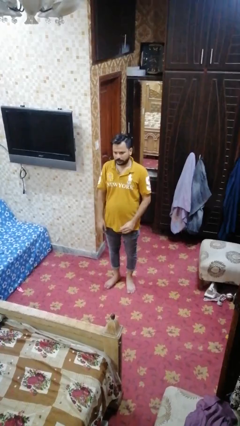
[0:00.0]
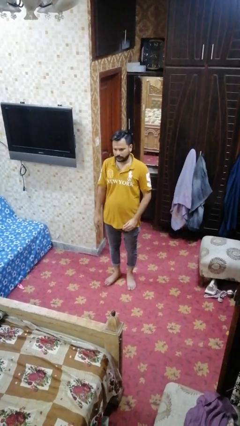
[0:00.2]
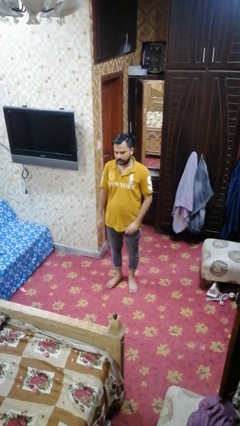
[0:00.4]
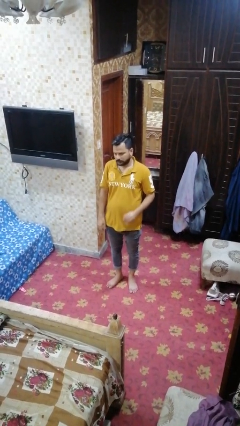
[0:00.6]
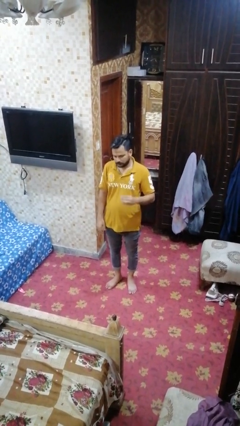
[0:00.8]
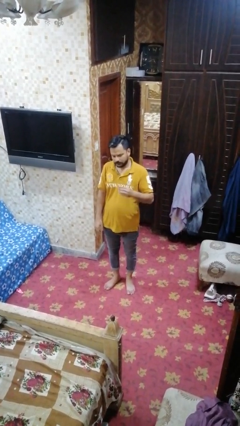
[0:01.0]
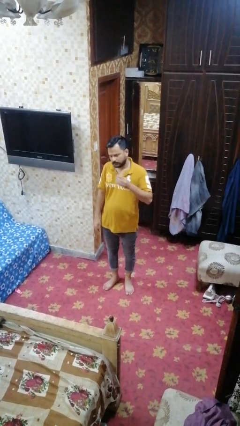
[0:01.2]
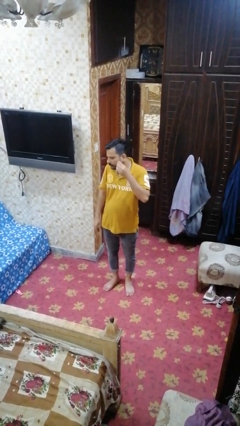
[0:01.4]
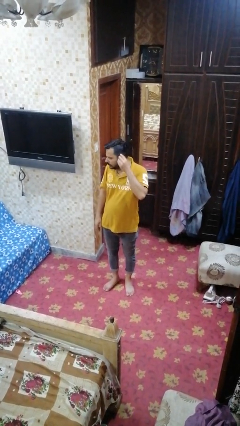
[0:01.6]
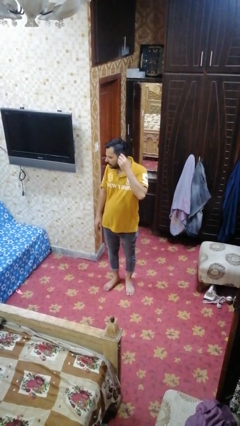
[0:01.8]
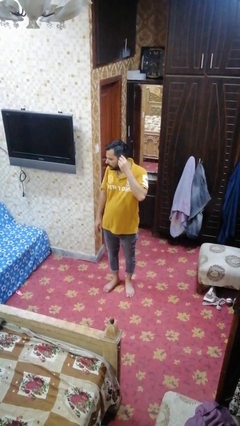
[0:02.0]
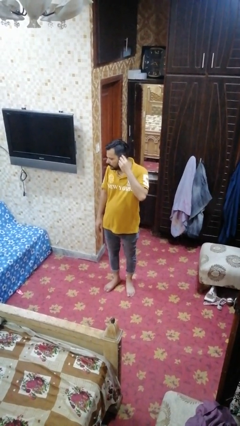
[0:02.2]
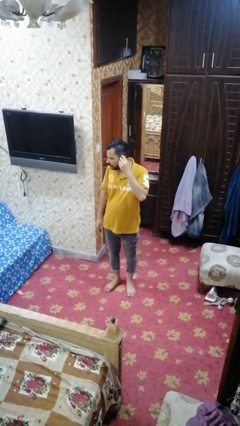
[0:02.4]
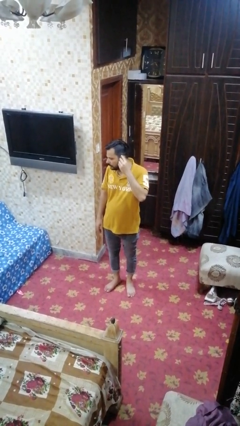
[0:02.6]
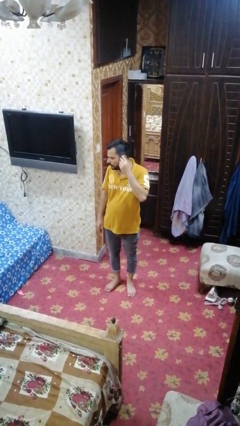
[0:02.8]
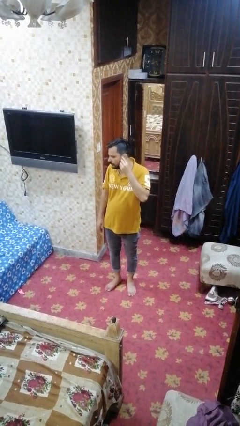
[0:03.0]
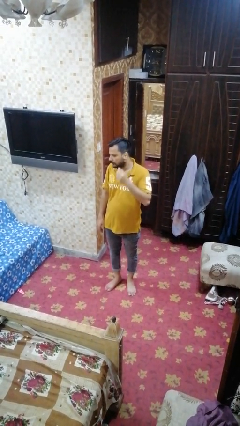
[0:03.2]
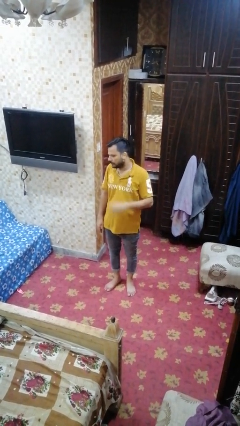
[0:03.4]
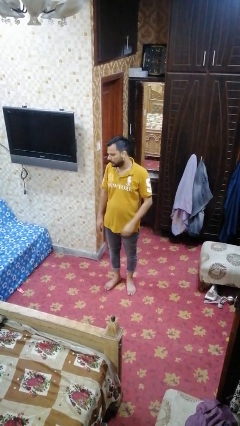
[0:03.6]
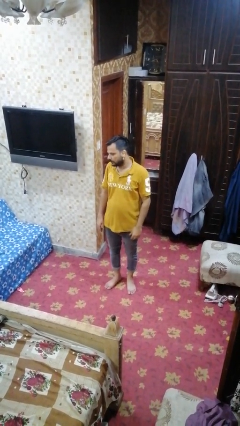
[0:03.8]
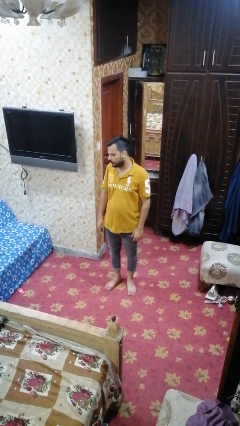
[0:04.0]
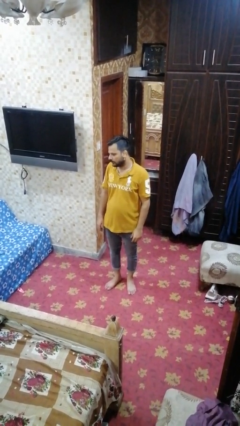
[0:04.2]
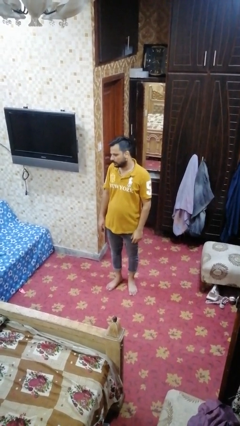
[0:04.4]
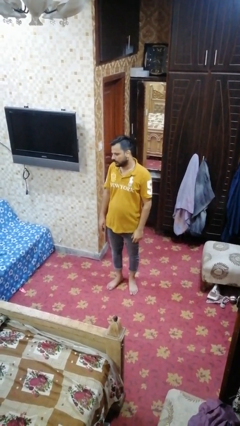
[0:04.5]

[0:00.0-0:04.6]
person puts on earrings

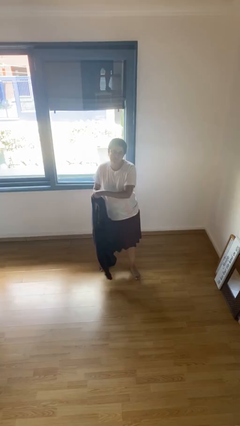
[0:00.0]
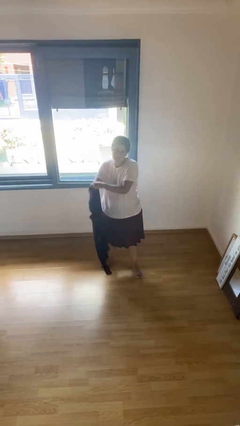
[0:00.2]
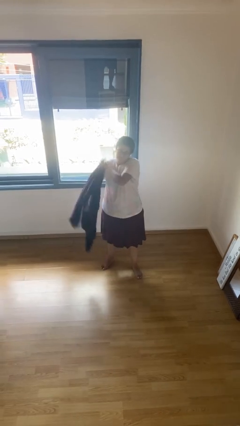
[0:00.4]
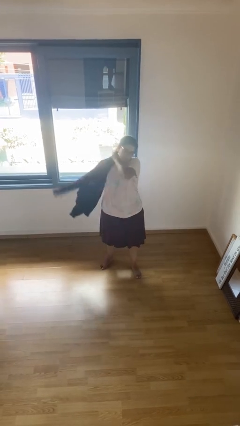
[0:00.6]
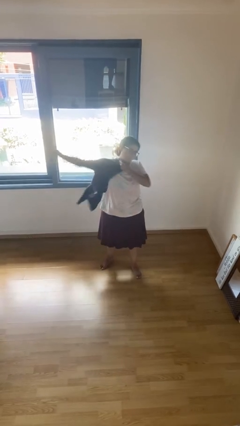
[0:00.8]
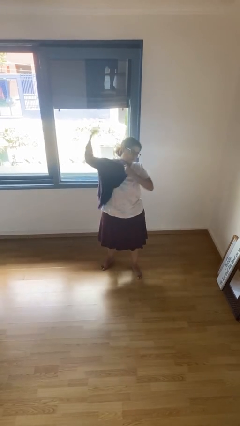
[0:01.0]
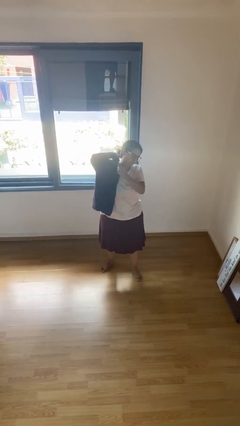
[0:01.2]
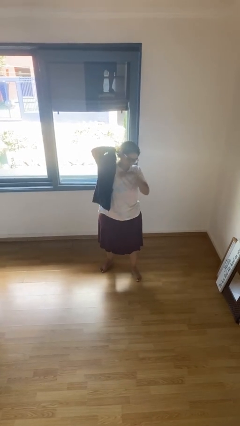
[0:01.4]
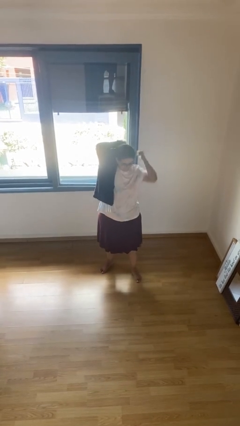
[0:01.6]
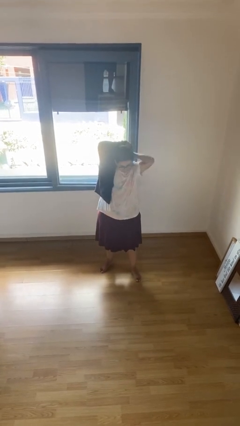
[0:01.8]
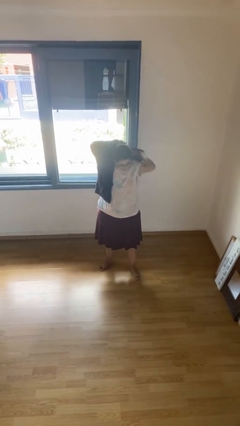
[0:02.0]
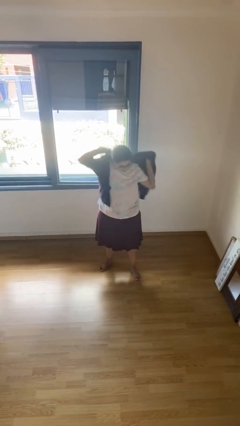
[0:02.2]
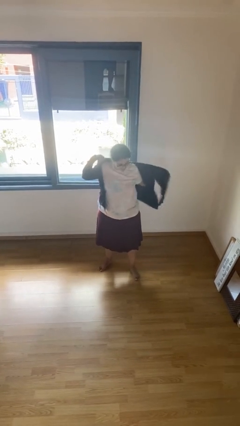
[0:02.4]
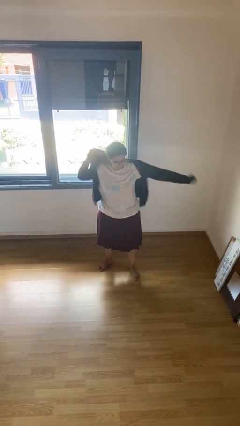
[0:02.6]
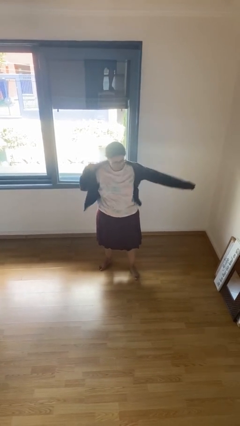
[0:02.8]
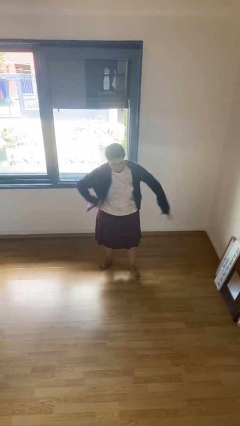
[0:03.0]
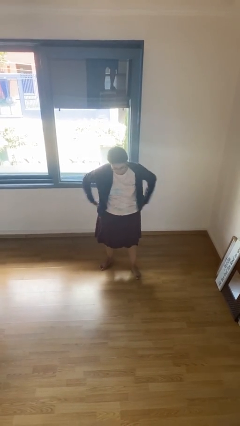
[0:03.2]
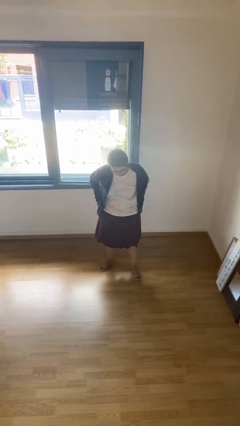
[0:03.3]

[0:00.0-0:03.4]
person puts on jacket

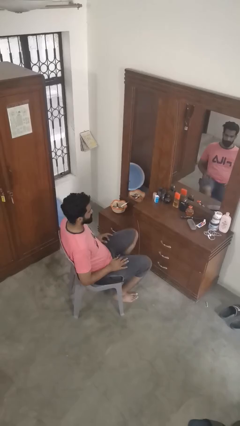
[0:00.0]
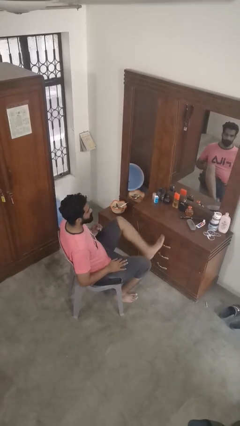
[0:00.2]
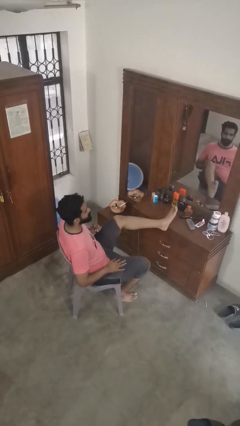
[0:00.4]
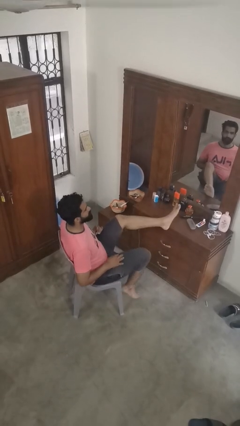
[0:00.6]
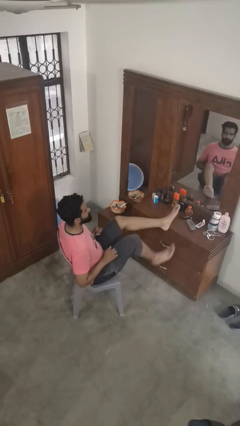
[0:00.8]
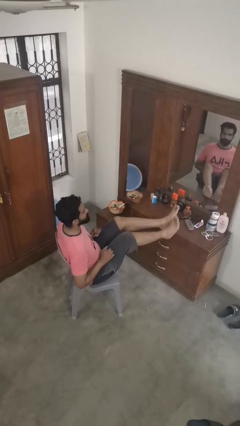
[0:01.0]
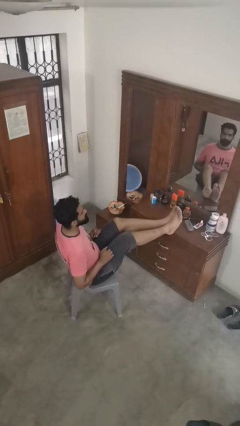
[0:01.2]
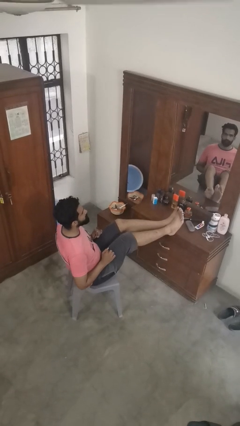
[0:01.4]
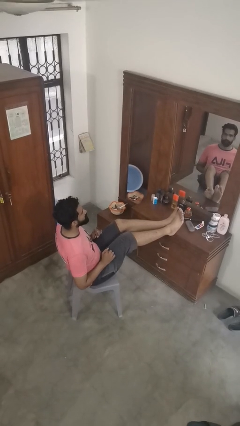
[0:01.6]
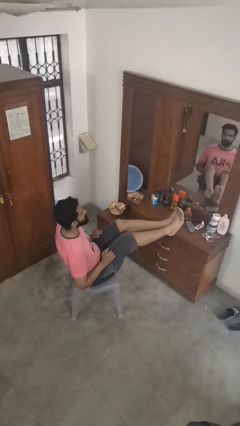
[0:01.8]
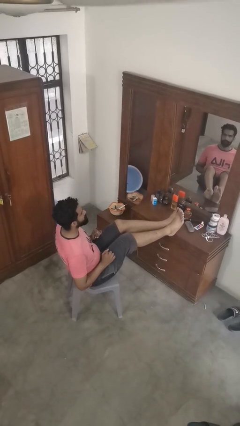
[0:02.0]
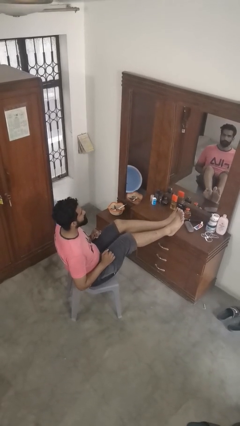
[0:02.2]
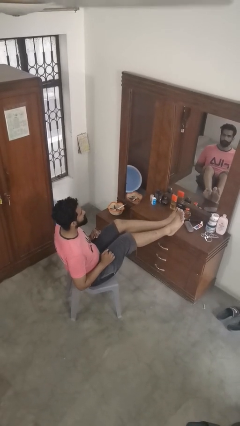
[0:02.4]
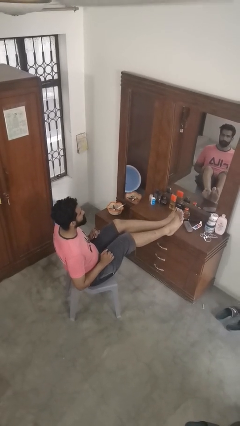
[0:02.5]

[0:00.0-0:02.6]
person puts feet up

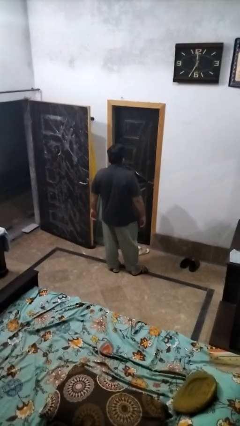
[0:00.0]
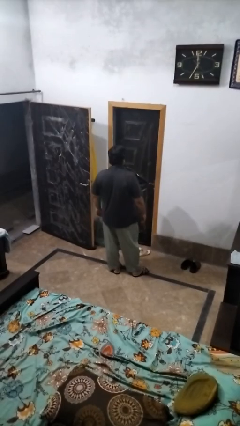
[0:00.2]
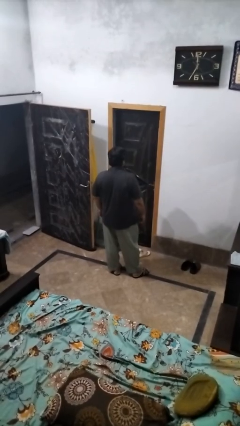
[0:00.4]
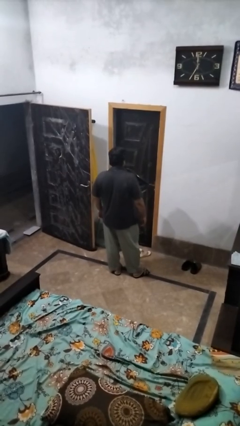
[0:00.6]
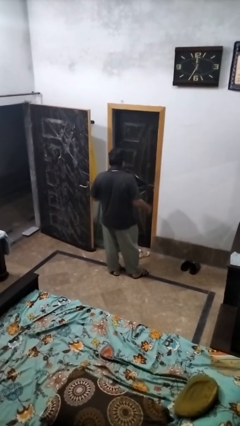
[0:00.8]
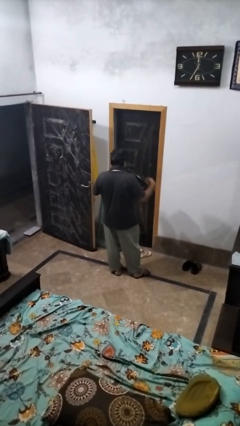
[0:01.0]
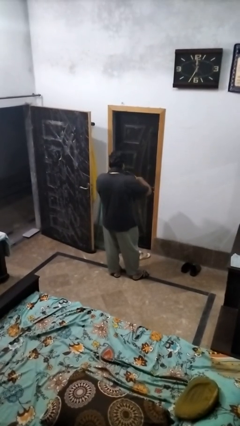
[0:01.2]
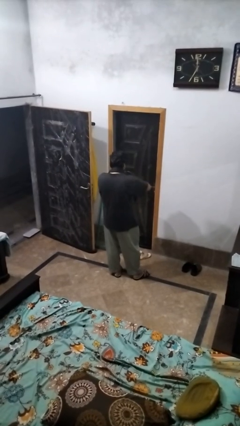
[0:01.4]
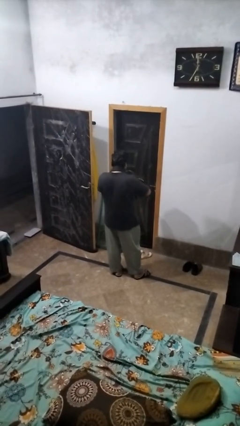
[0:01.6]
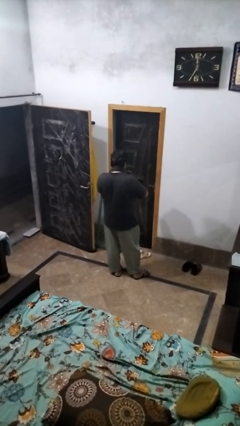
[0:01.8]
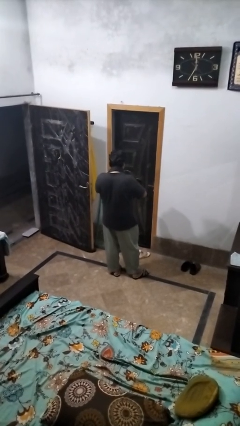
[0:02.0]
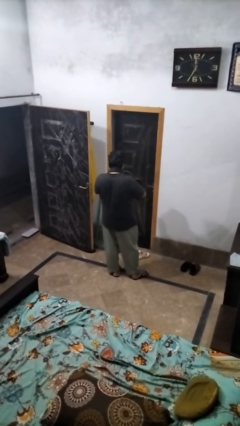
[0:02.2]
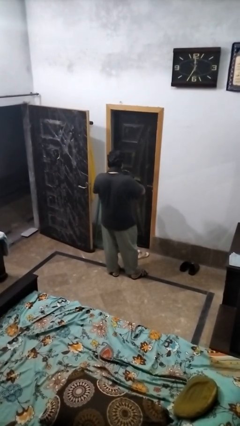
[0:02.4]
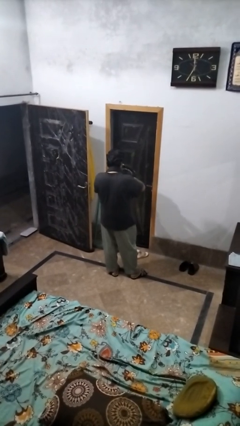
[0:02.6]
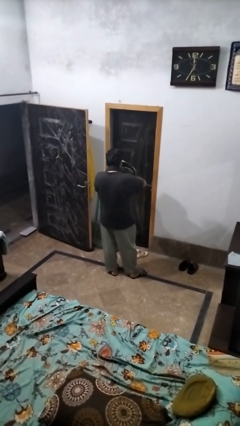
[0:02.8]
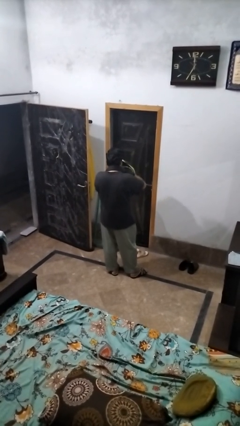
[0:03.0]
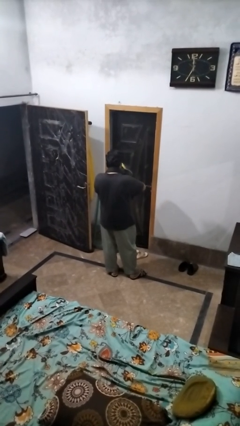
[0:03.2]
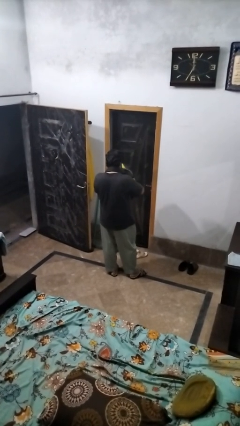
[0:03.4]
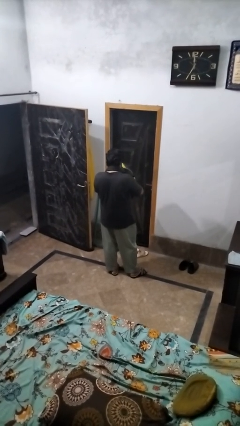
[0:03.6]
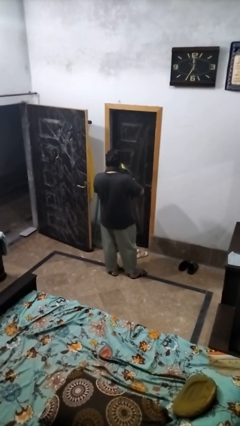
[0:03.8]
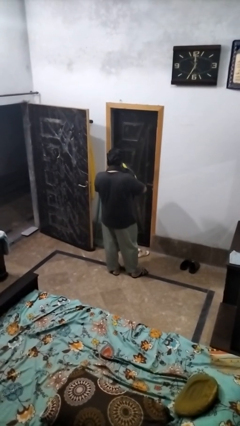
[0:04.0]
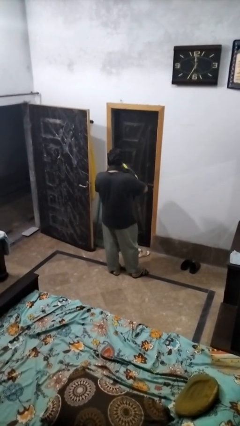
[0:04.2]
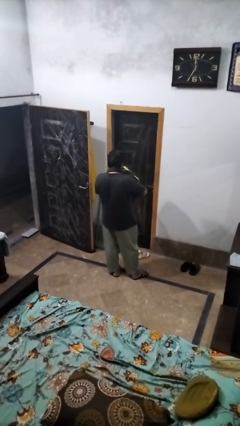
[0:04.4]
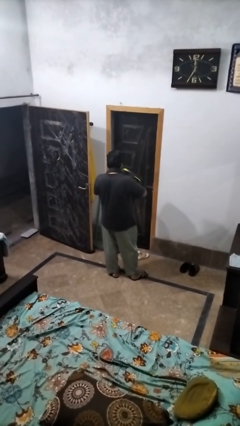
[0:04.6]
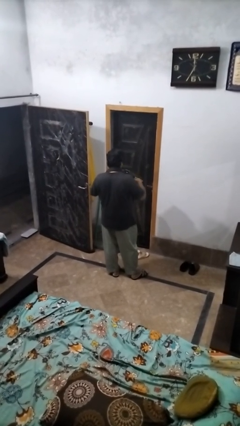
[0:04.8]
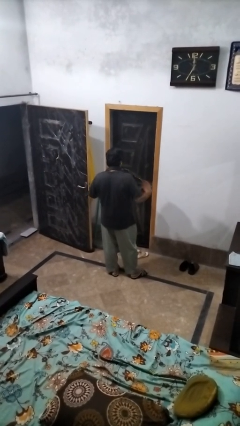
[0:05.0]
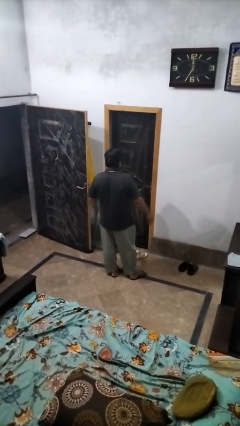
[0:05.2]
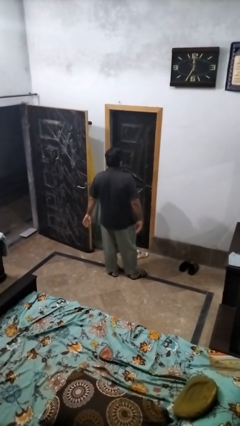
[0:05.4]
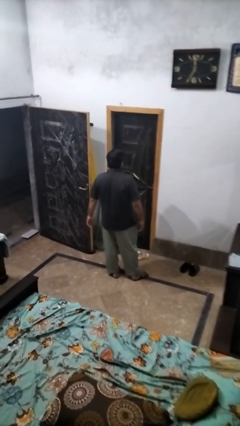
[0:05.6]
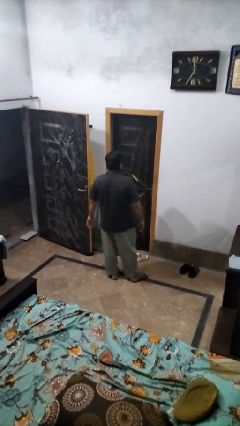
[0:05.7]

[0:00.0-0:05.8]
person searches in bag

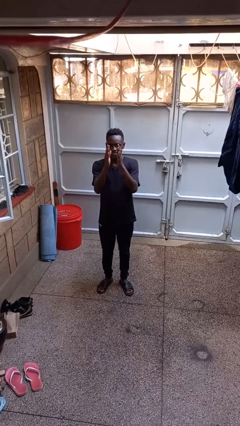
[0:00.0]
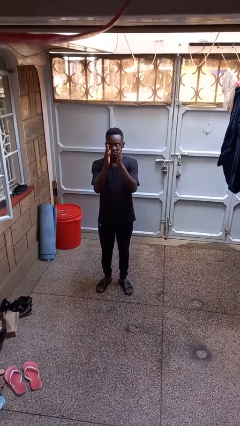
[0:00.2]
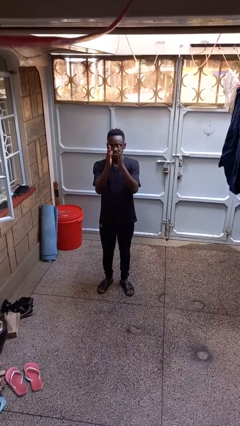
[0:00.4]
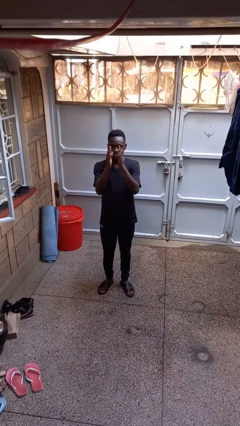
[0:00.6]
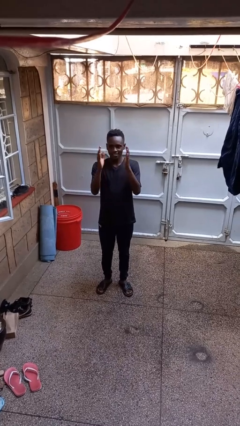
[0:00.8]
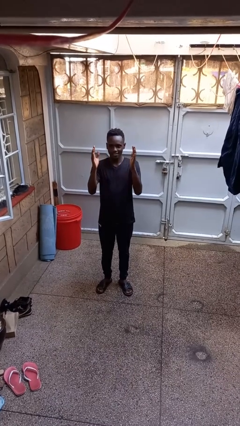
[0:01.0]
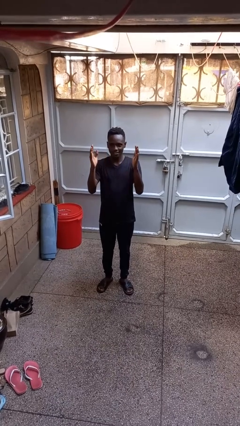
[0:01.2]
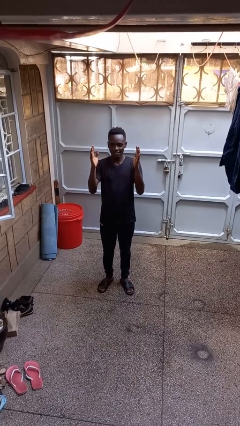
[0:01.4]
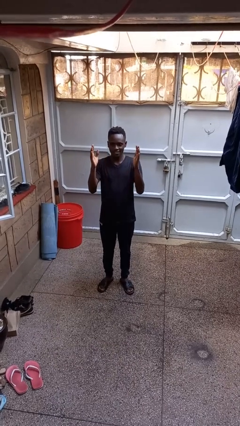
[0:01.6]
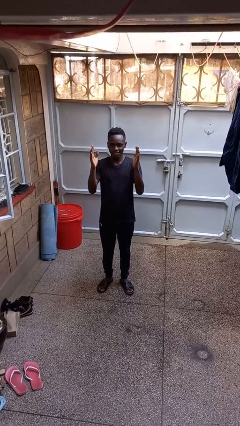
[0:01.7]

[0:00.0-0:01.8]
person gestures zoom out
